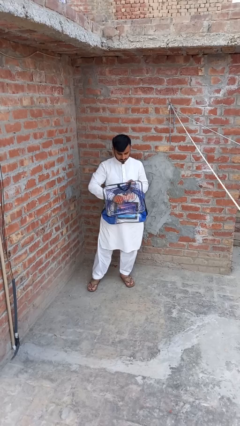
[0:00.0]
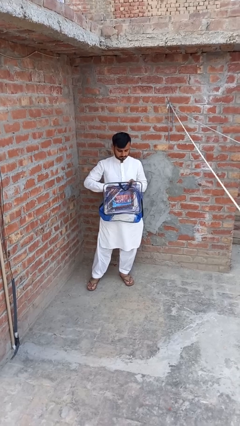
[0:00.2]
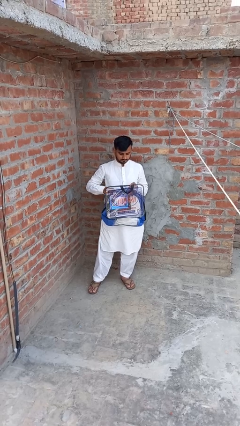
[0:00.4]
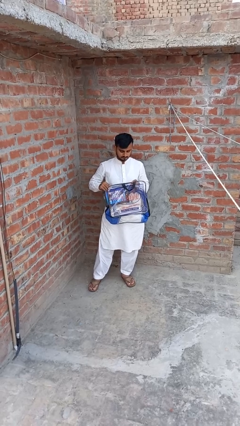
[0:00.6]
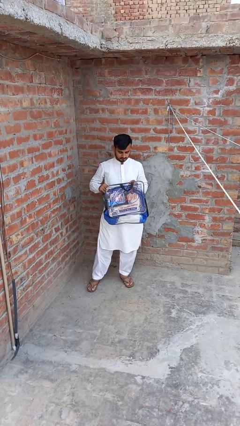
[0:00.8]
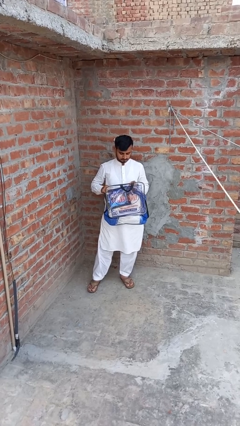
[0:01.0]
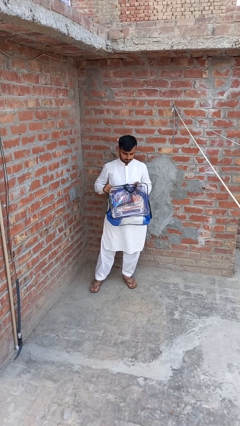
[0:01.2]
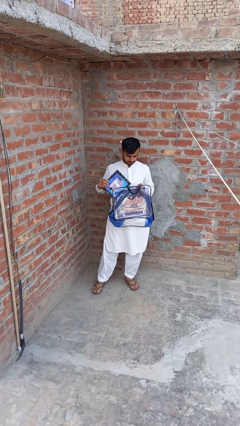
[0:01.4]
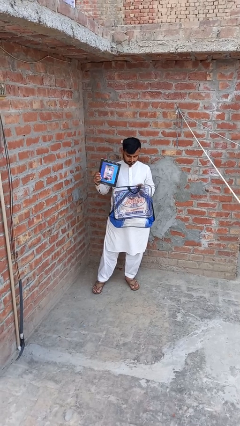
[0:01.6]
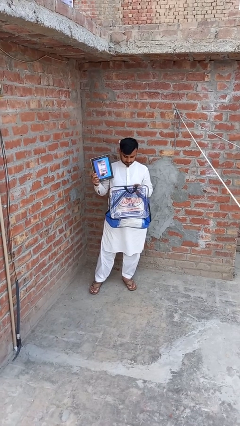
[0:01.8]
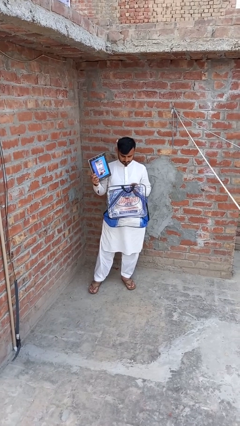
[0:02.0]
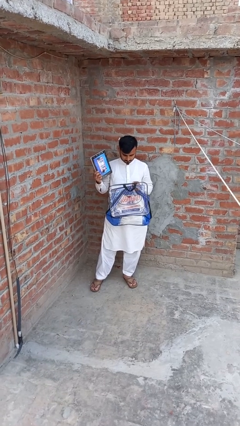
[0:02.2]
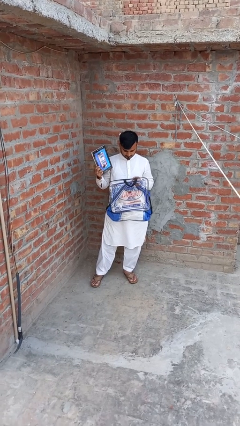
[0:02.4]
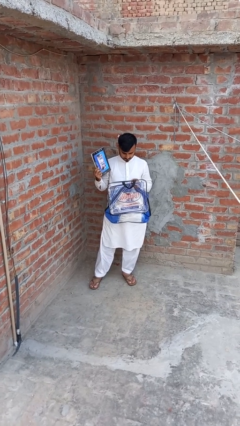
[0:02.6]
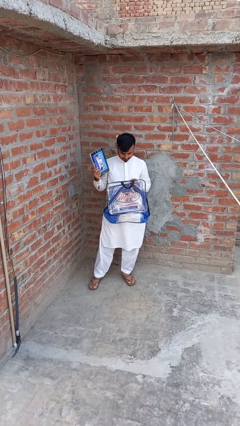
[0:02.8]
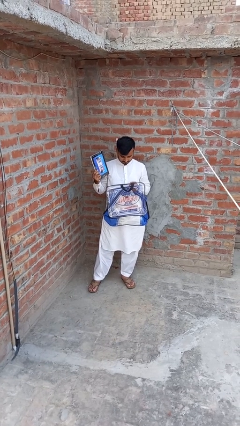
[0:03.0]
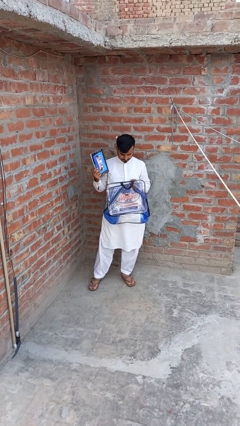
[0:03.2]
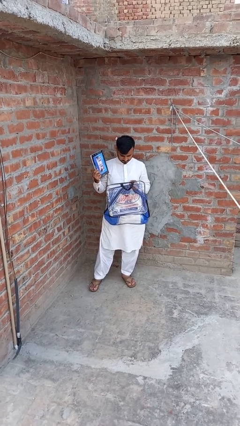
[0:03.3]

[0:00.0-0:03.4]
person takes object from backpack

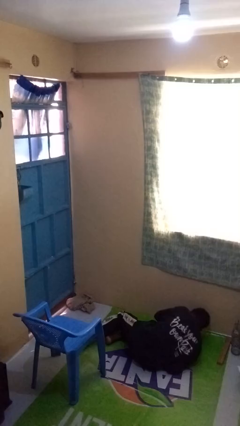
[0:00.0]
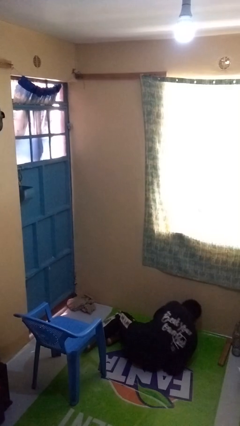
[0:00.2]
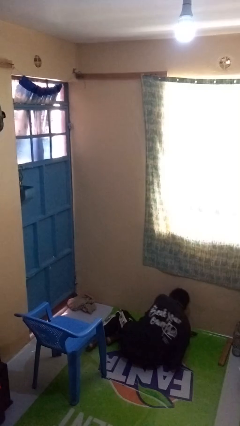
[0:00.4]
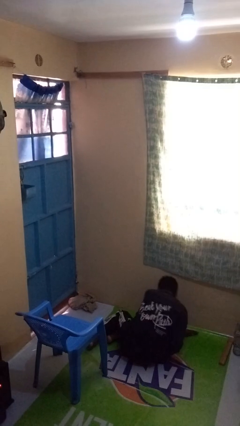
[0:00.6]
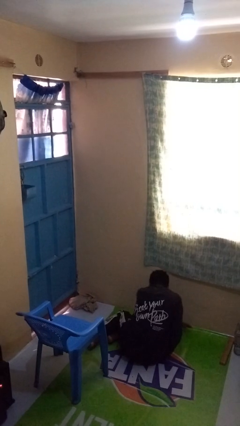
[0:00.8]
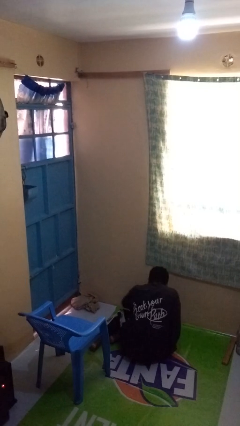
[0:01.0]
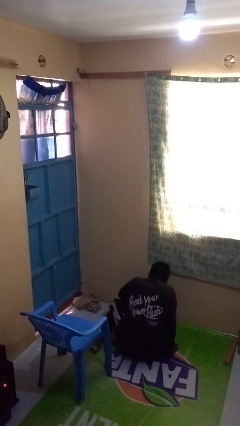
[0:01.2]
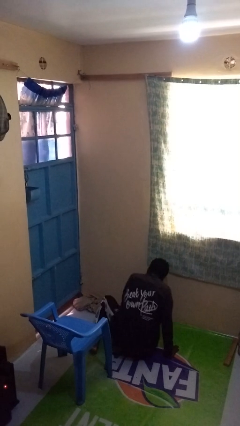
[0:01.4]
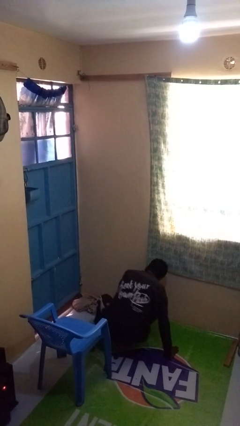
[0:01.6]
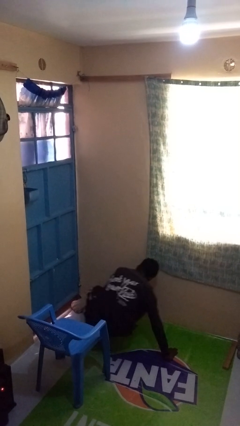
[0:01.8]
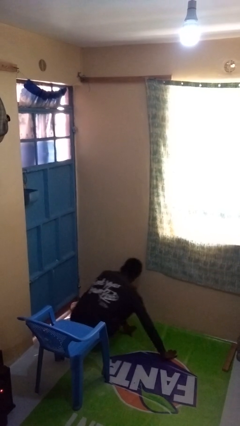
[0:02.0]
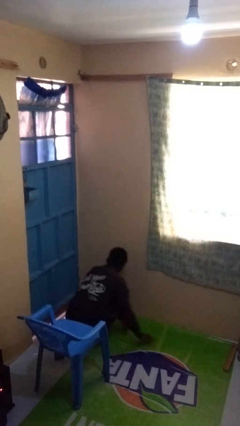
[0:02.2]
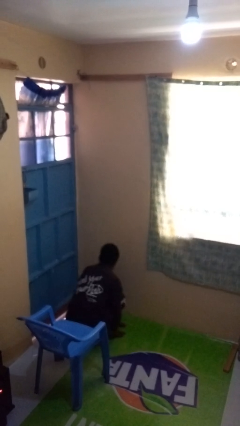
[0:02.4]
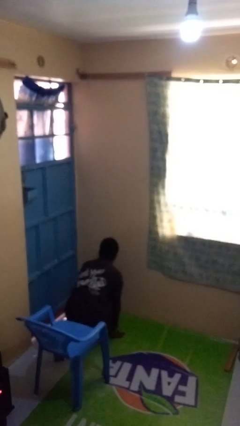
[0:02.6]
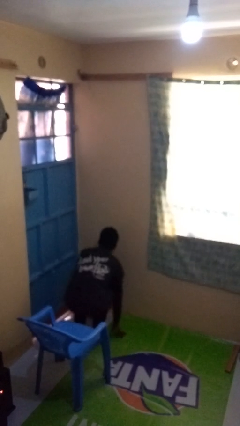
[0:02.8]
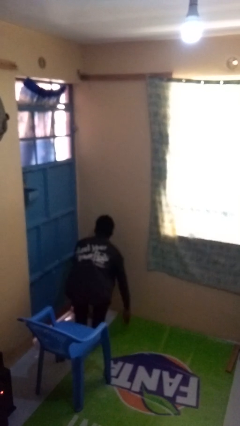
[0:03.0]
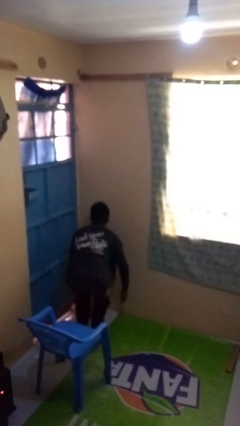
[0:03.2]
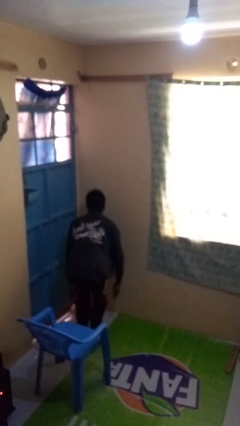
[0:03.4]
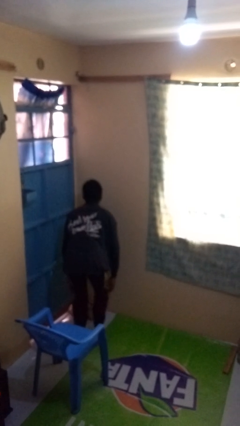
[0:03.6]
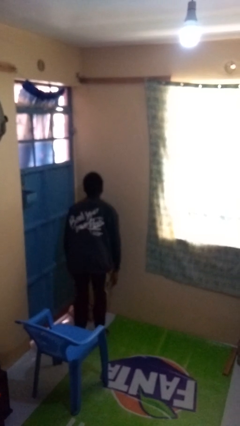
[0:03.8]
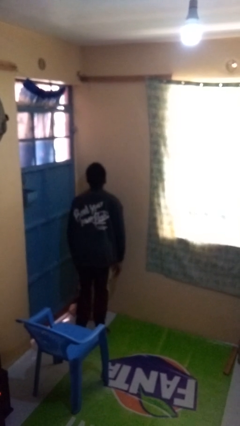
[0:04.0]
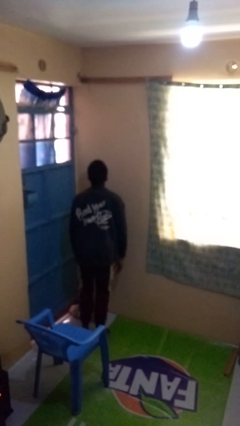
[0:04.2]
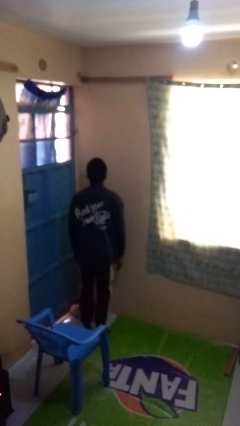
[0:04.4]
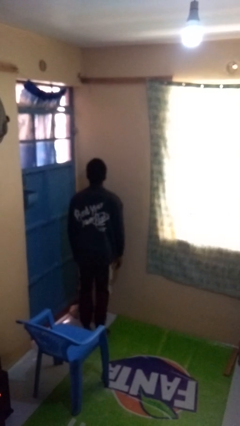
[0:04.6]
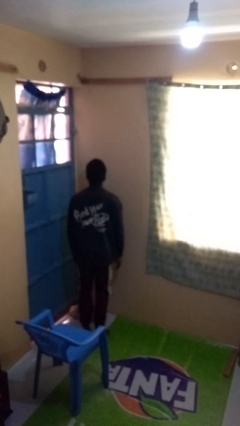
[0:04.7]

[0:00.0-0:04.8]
person stands up from floor

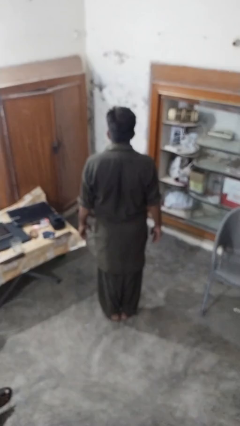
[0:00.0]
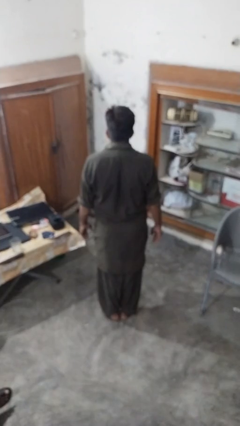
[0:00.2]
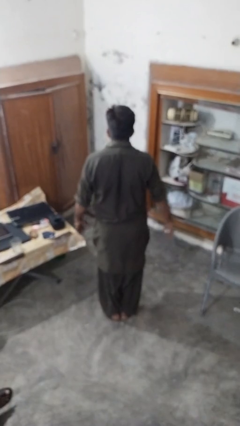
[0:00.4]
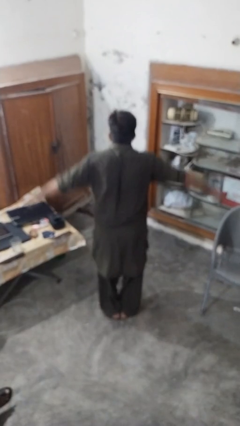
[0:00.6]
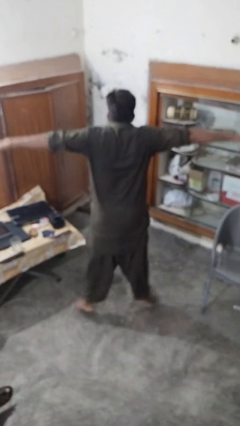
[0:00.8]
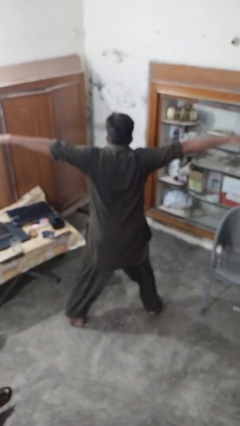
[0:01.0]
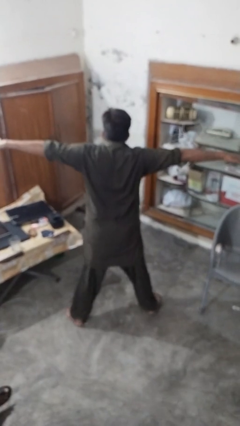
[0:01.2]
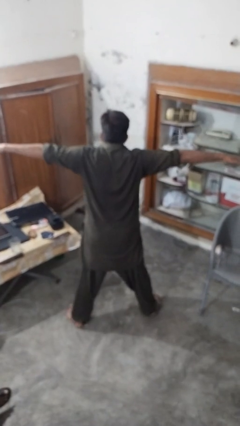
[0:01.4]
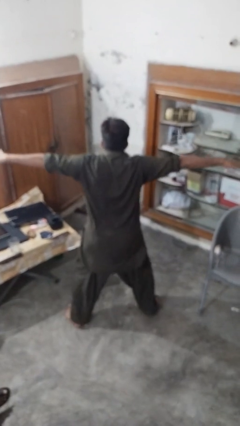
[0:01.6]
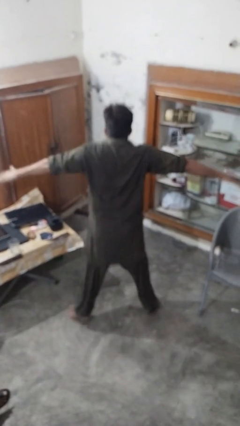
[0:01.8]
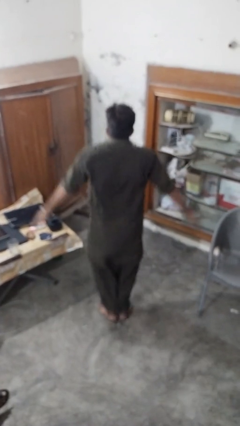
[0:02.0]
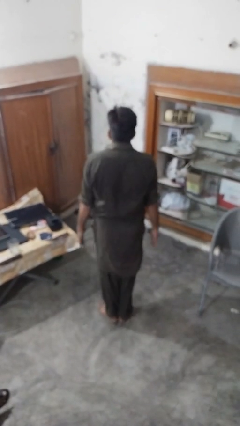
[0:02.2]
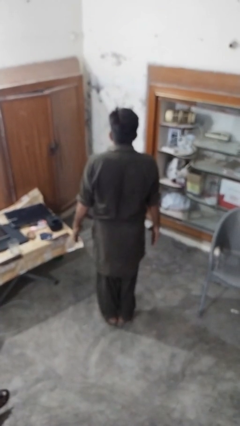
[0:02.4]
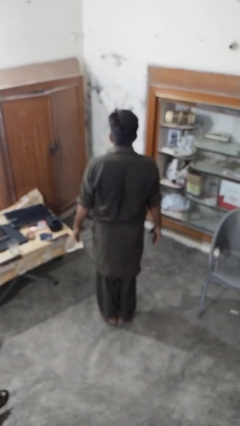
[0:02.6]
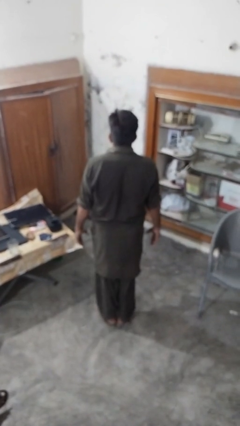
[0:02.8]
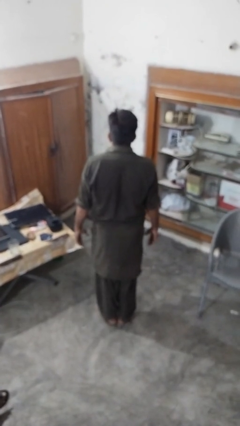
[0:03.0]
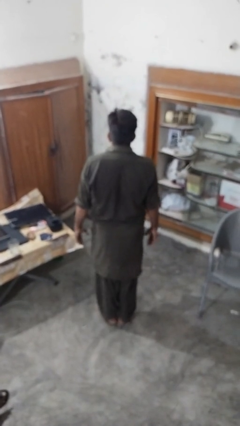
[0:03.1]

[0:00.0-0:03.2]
person exercises with jumping jacks

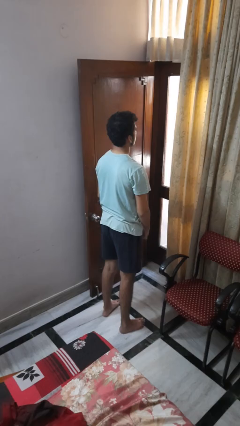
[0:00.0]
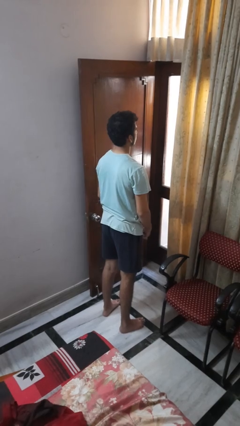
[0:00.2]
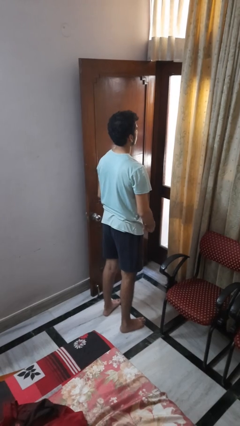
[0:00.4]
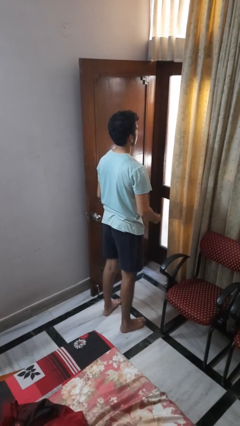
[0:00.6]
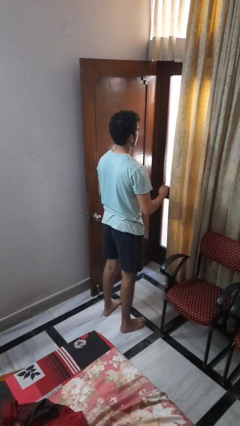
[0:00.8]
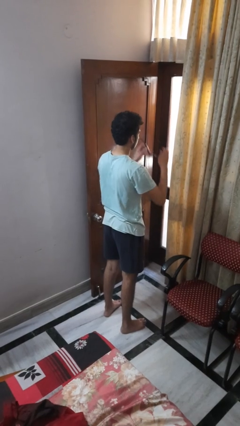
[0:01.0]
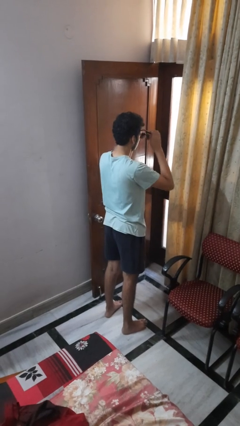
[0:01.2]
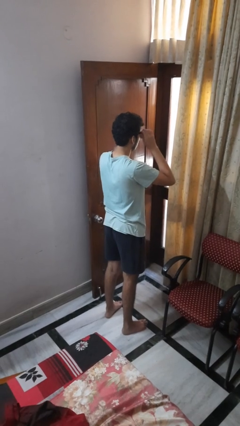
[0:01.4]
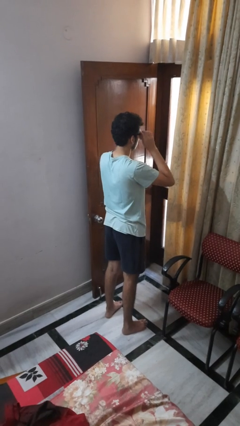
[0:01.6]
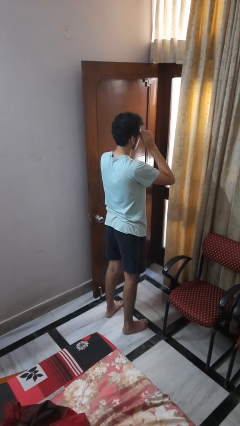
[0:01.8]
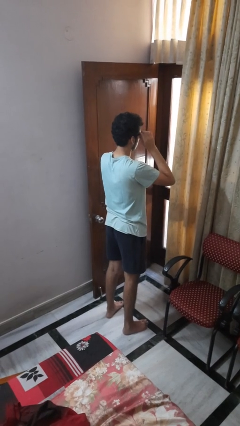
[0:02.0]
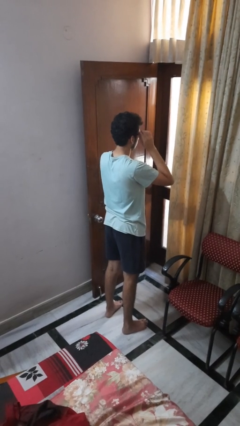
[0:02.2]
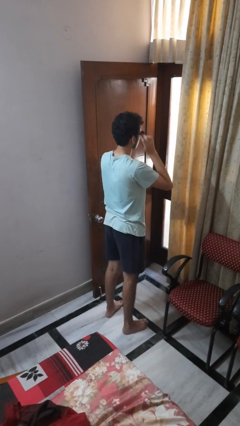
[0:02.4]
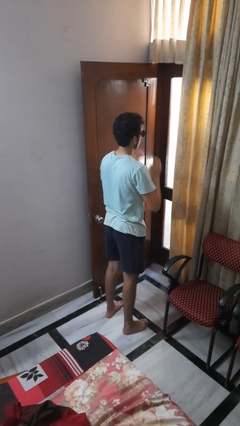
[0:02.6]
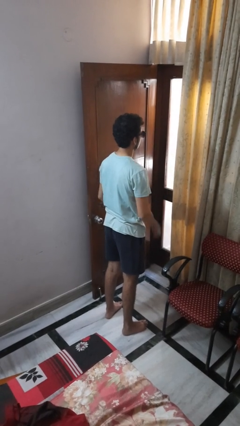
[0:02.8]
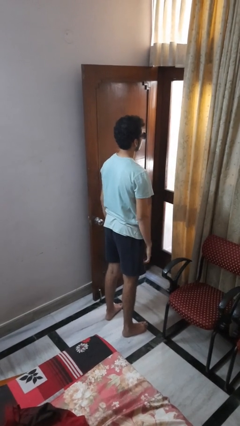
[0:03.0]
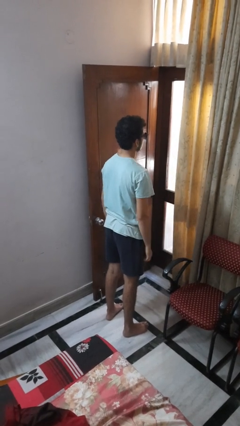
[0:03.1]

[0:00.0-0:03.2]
person puts on sunglasses

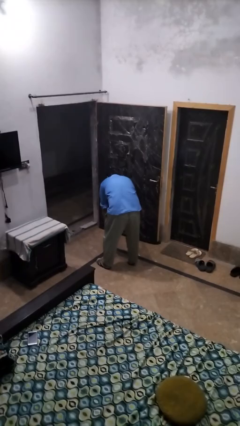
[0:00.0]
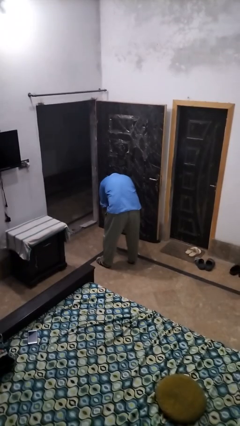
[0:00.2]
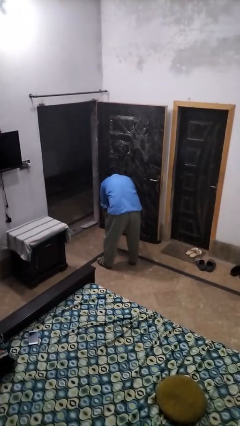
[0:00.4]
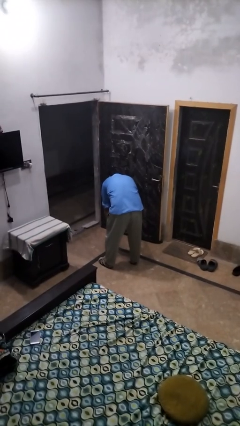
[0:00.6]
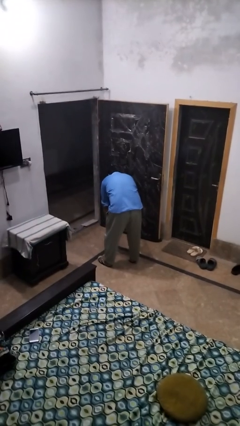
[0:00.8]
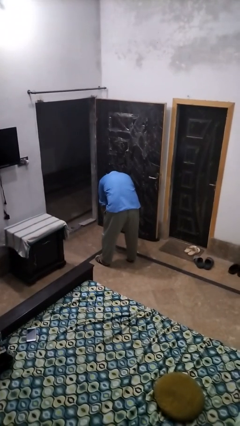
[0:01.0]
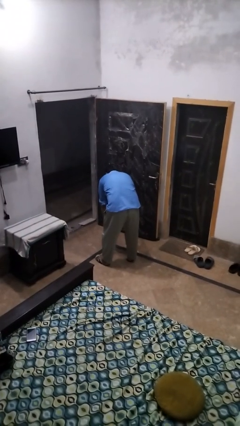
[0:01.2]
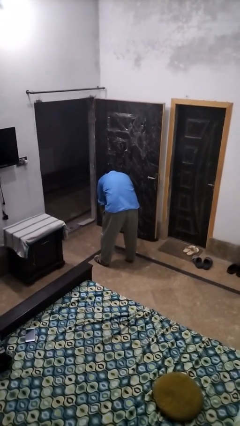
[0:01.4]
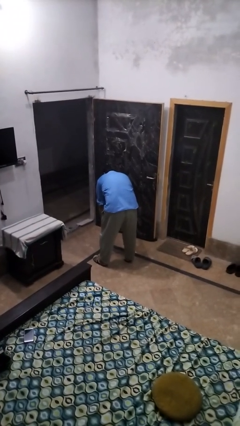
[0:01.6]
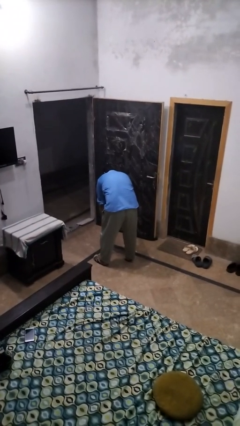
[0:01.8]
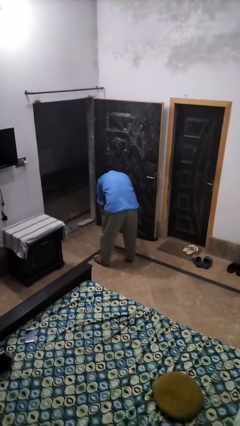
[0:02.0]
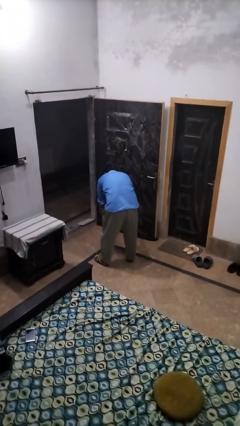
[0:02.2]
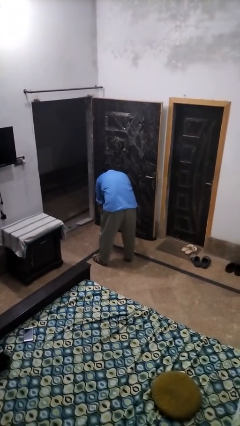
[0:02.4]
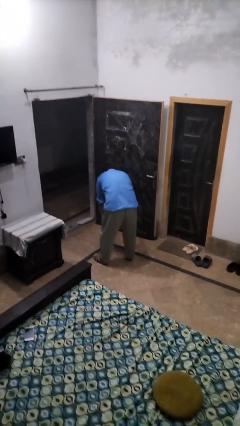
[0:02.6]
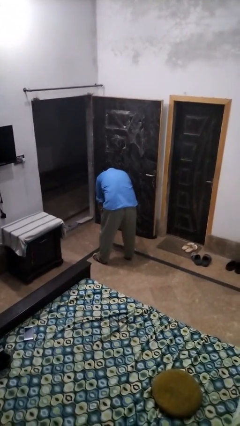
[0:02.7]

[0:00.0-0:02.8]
person catches dropped object

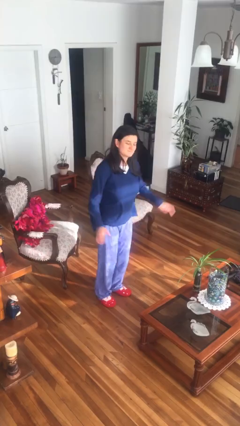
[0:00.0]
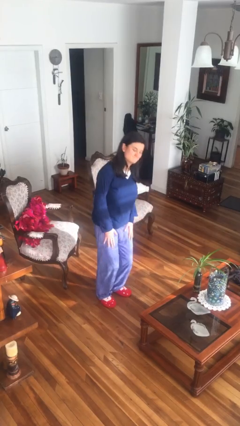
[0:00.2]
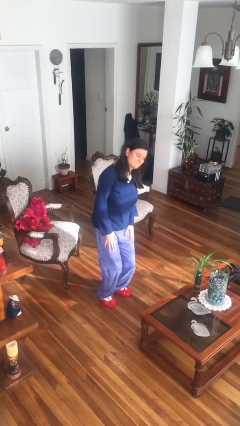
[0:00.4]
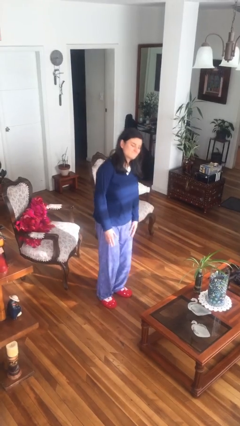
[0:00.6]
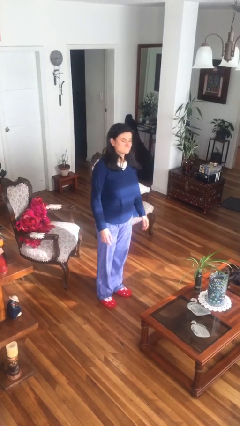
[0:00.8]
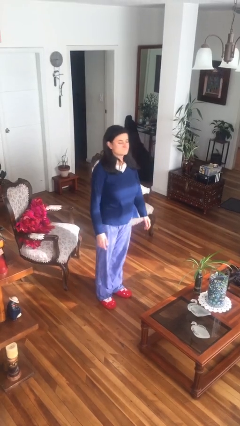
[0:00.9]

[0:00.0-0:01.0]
person slaps hands on thighs
